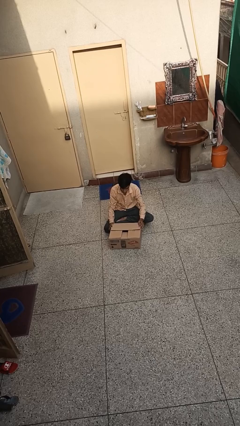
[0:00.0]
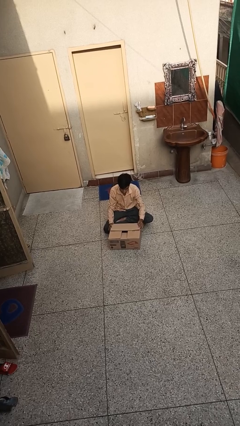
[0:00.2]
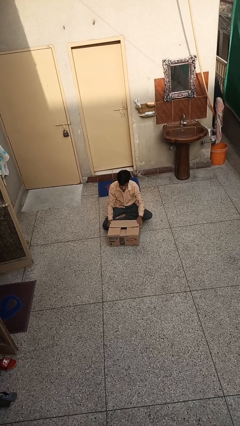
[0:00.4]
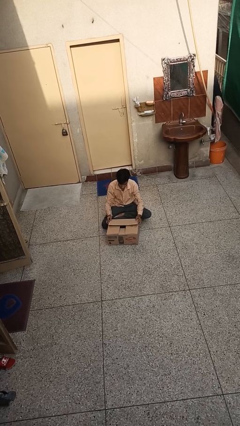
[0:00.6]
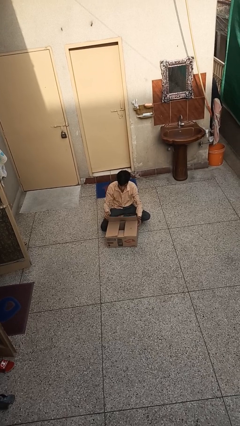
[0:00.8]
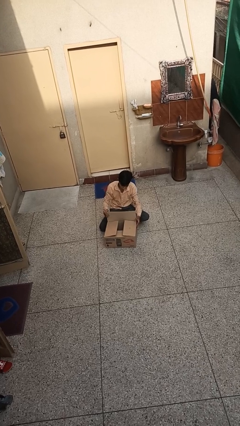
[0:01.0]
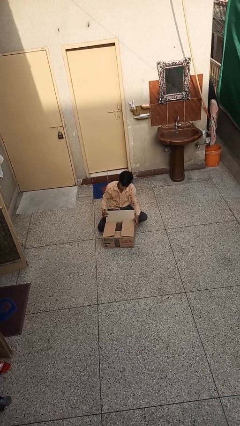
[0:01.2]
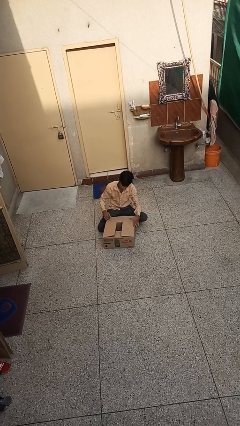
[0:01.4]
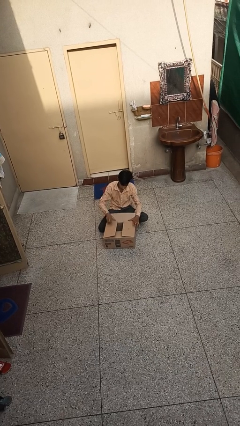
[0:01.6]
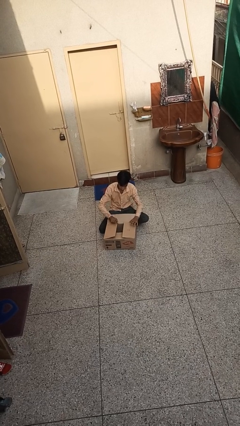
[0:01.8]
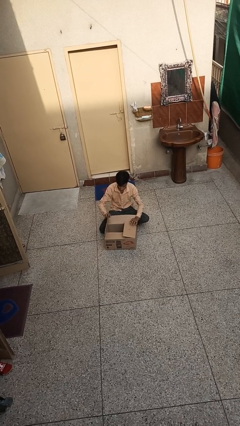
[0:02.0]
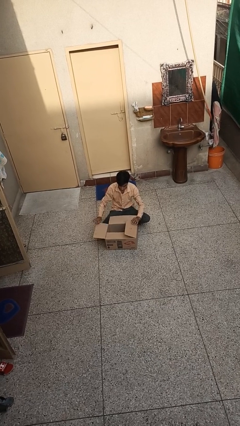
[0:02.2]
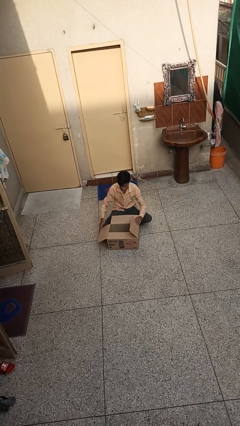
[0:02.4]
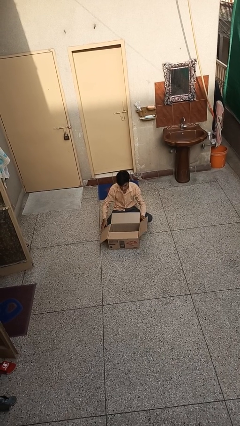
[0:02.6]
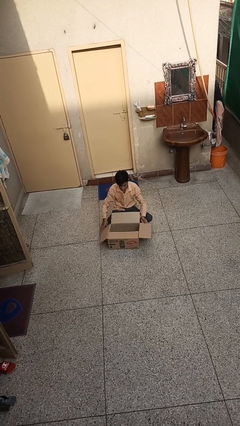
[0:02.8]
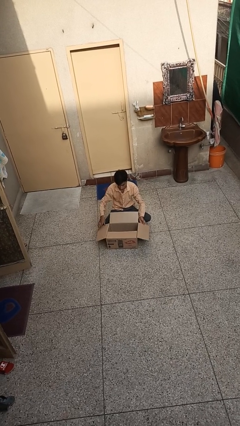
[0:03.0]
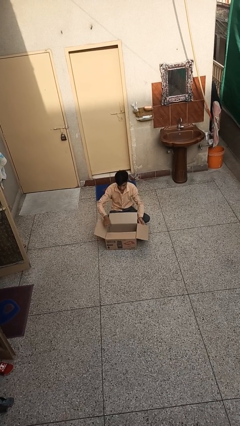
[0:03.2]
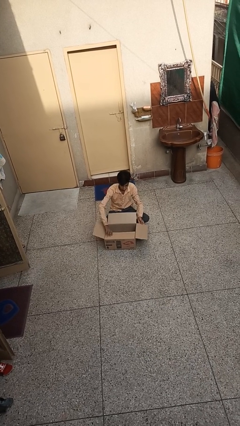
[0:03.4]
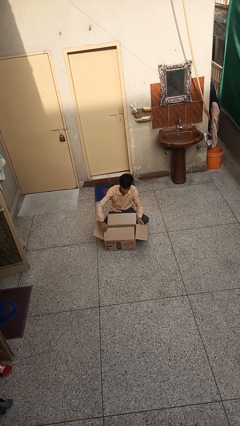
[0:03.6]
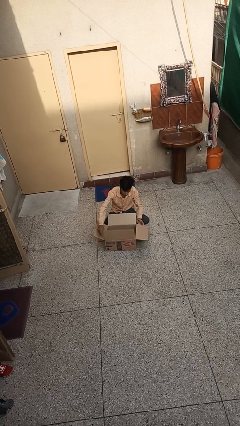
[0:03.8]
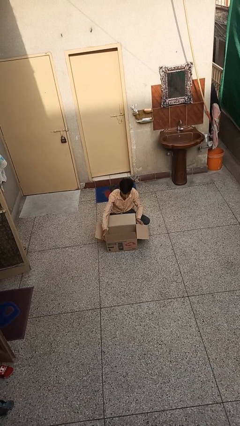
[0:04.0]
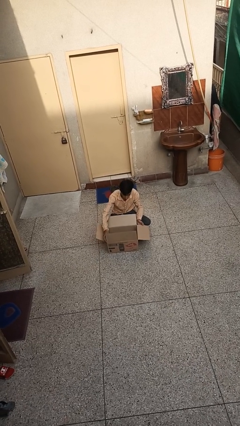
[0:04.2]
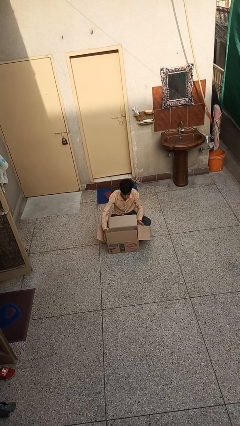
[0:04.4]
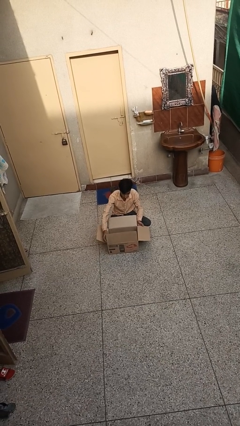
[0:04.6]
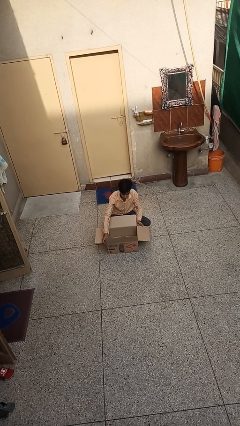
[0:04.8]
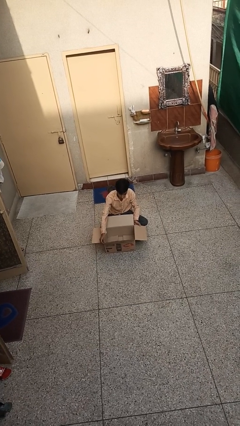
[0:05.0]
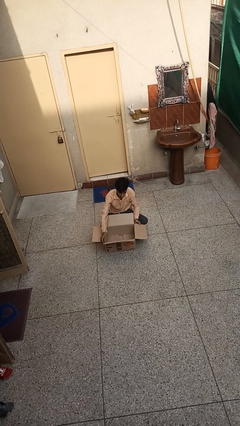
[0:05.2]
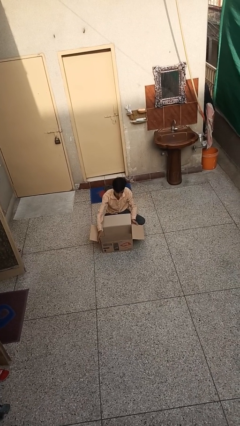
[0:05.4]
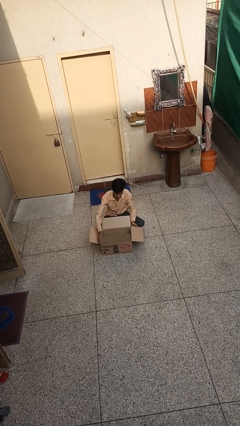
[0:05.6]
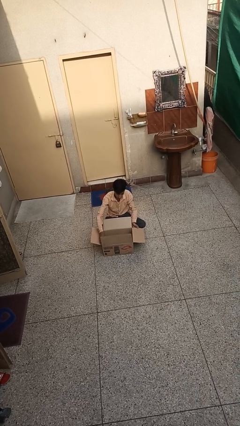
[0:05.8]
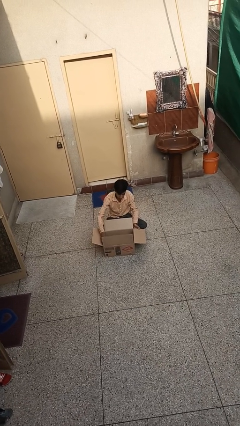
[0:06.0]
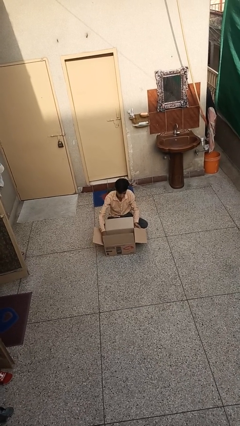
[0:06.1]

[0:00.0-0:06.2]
person opens box

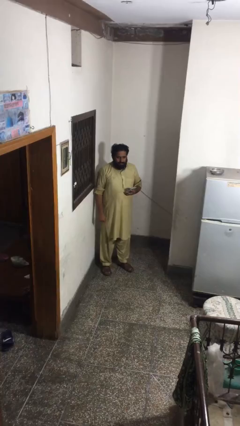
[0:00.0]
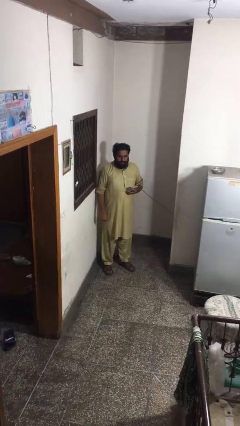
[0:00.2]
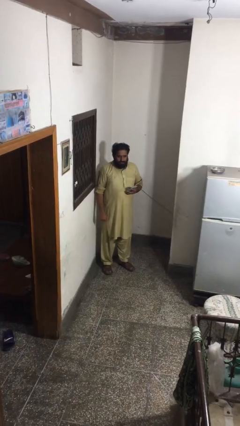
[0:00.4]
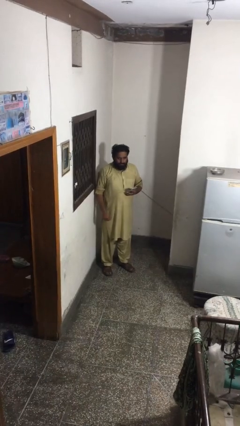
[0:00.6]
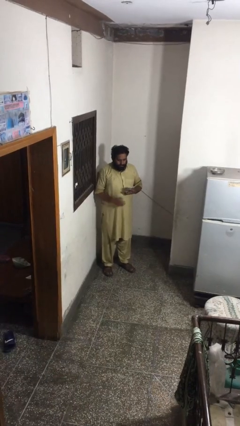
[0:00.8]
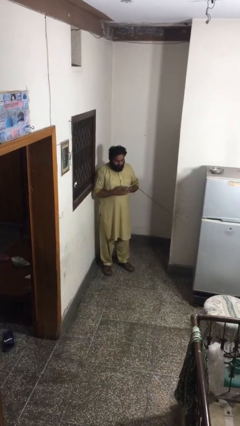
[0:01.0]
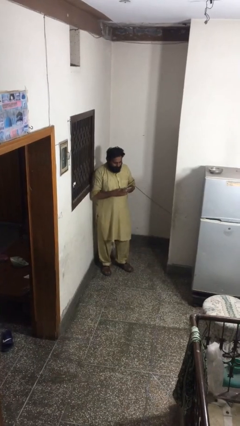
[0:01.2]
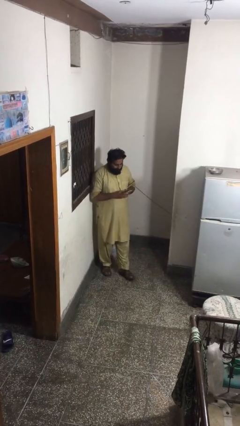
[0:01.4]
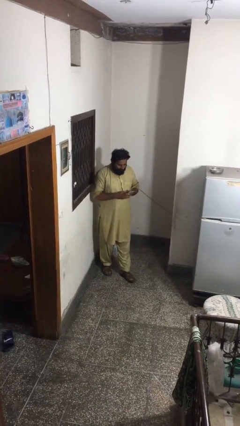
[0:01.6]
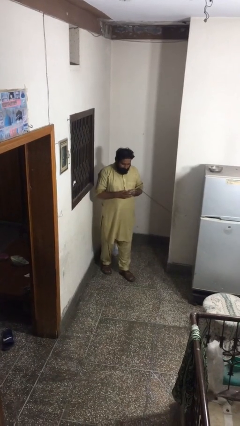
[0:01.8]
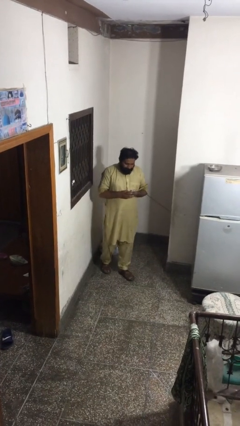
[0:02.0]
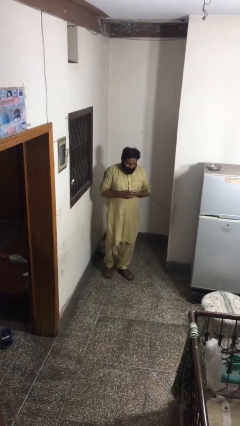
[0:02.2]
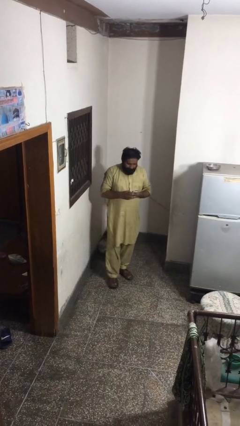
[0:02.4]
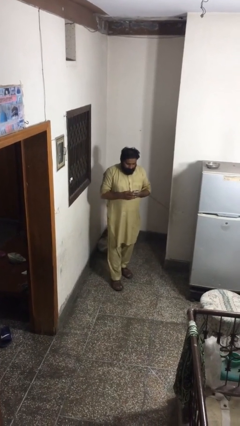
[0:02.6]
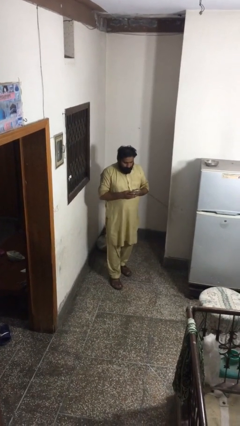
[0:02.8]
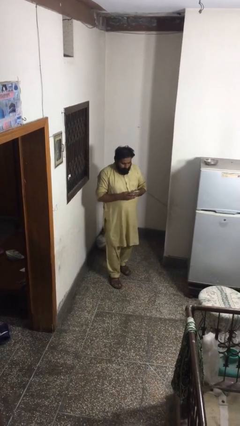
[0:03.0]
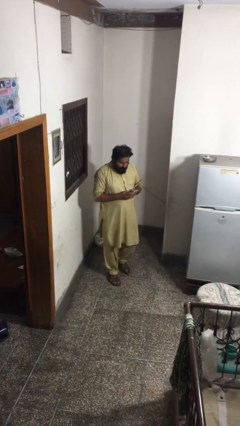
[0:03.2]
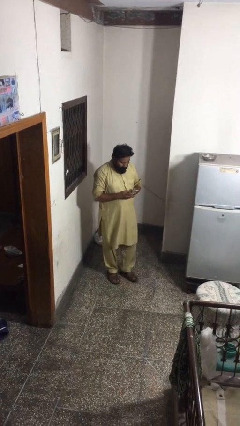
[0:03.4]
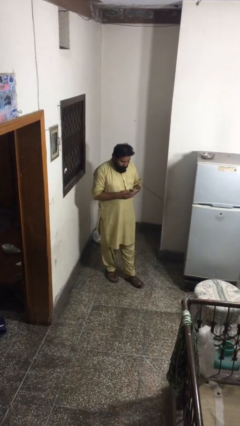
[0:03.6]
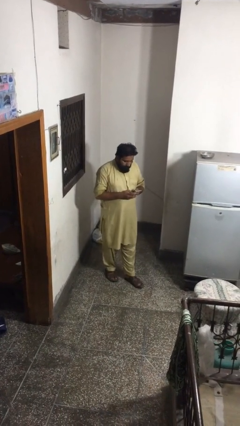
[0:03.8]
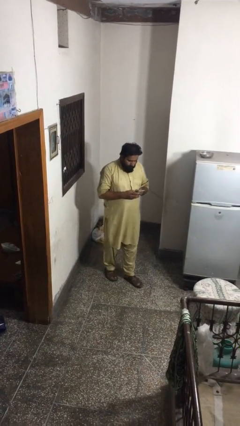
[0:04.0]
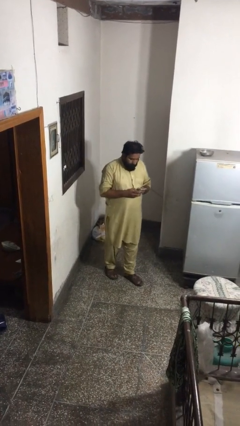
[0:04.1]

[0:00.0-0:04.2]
person texts on phone

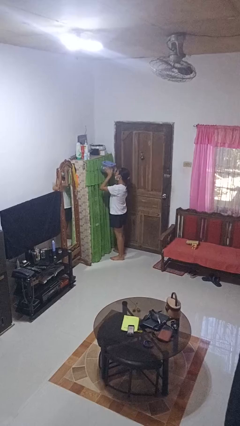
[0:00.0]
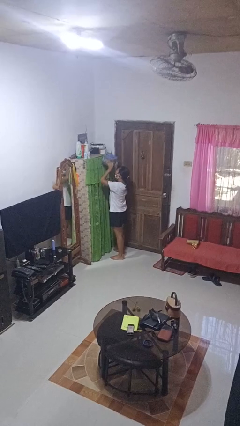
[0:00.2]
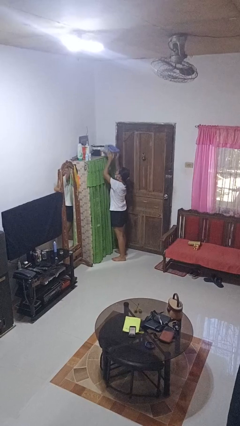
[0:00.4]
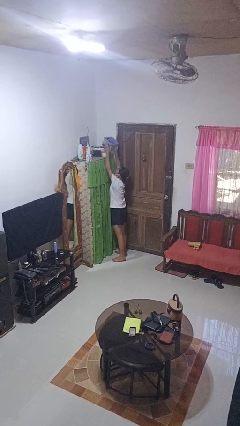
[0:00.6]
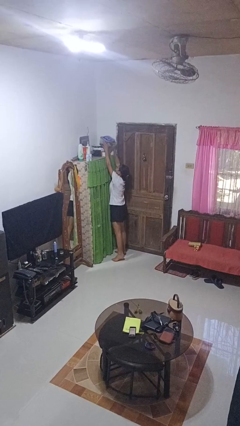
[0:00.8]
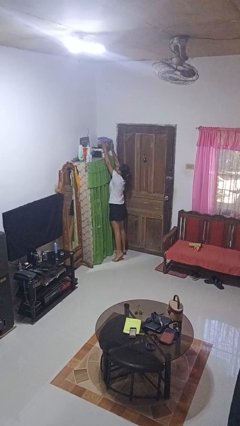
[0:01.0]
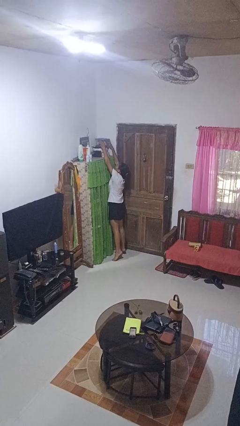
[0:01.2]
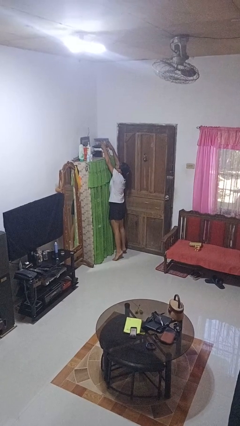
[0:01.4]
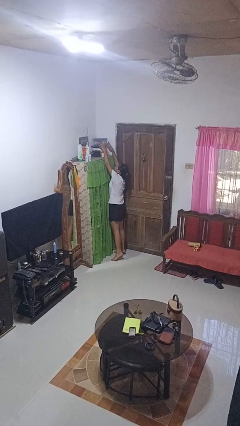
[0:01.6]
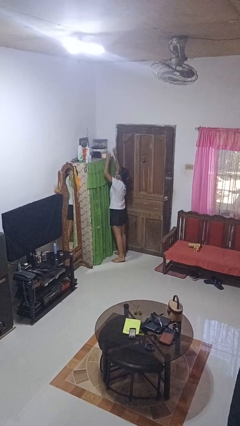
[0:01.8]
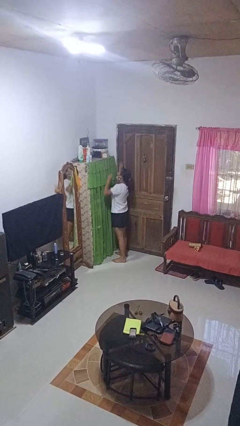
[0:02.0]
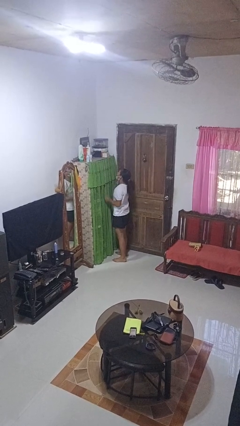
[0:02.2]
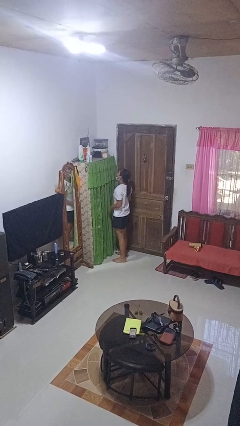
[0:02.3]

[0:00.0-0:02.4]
person puts down object on shelf

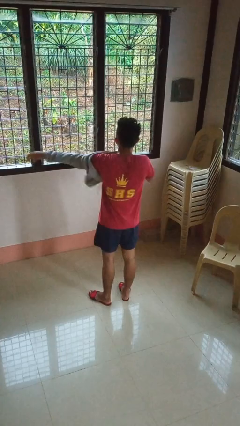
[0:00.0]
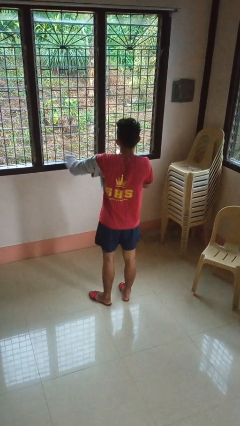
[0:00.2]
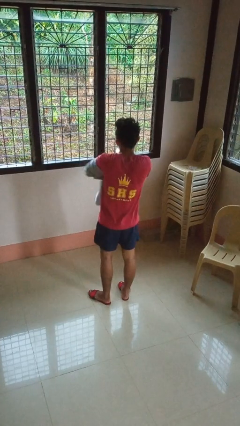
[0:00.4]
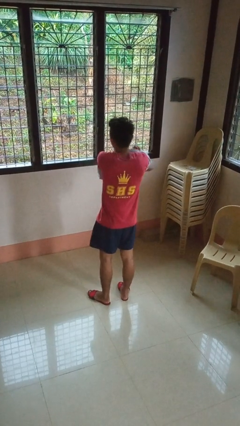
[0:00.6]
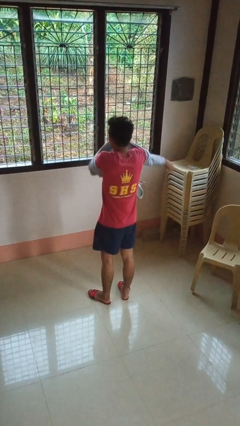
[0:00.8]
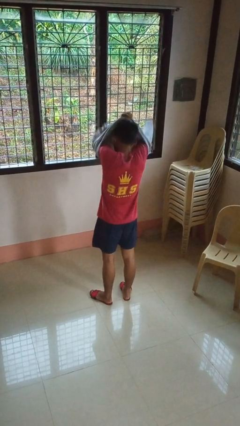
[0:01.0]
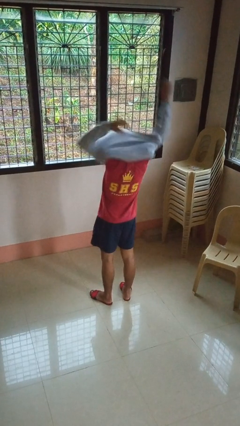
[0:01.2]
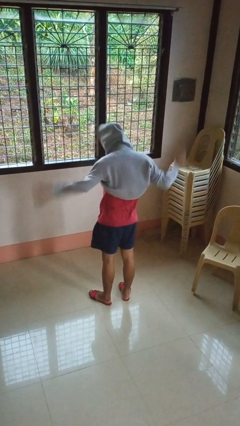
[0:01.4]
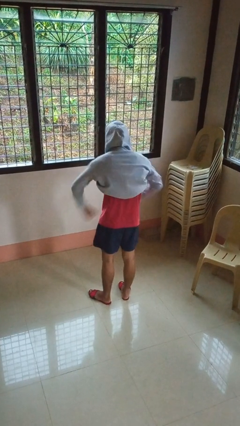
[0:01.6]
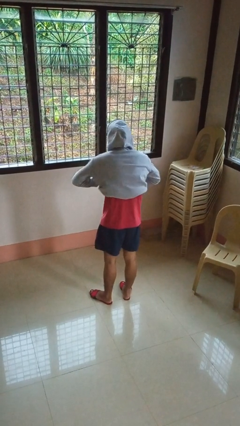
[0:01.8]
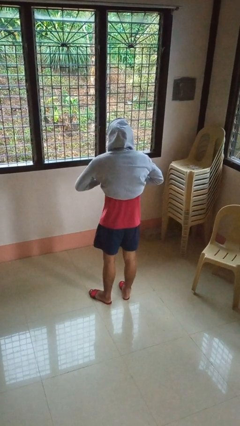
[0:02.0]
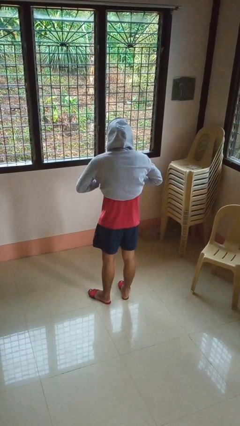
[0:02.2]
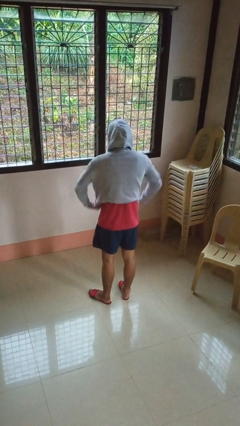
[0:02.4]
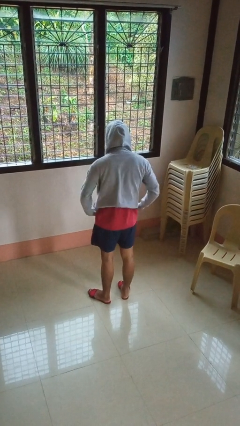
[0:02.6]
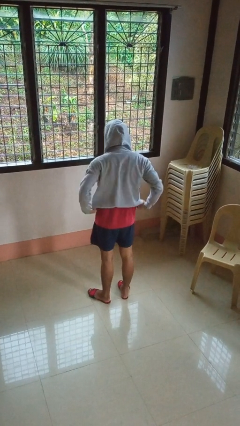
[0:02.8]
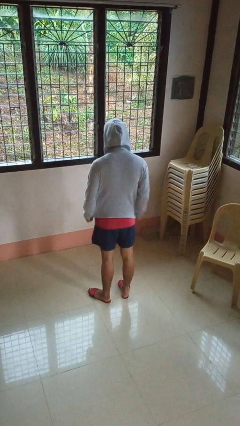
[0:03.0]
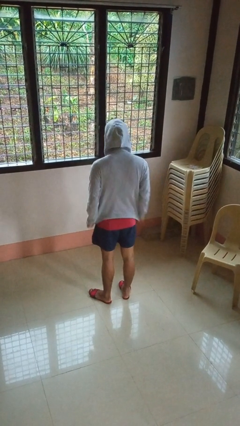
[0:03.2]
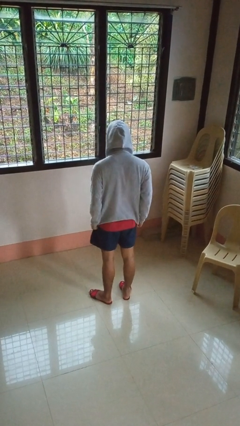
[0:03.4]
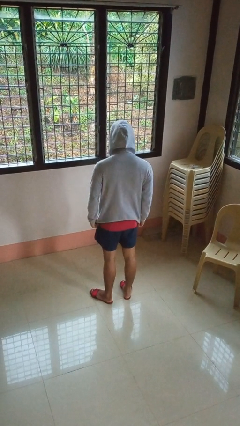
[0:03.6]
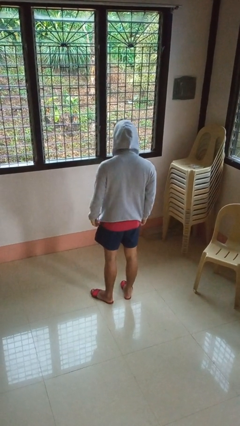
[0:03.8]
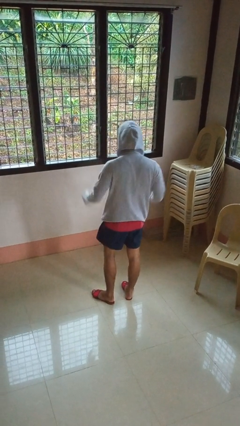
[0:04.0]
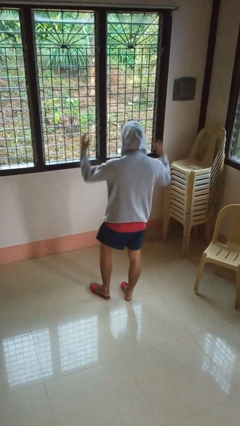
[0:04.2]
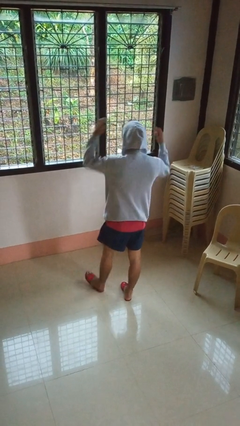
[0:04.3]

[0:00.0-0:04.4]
person puts on hoodie

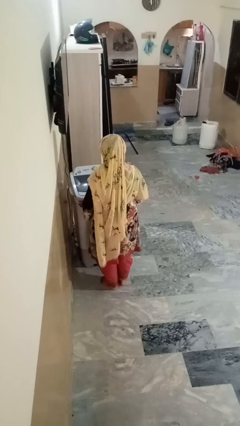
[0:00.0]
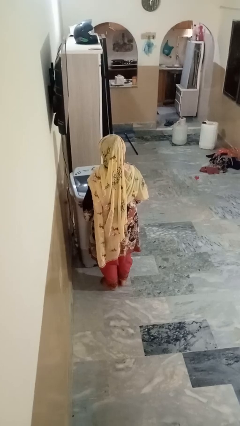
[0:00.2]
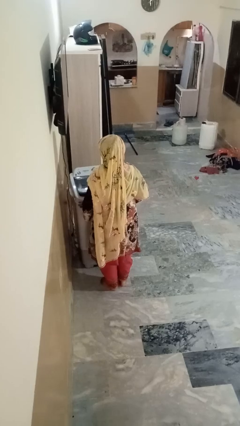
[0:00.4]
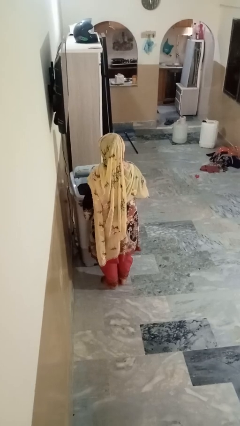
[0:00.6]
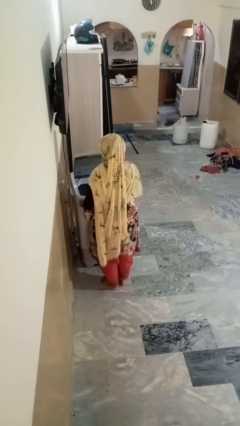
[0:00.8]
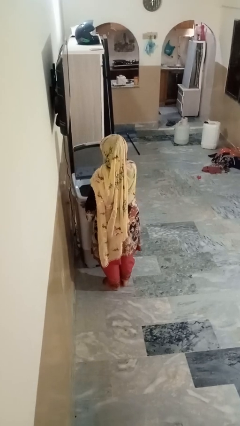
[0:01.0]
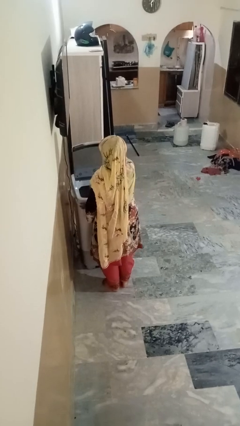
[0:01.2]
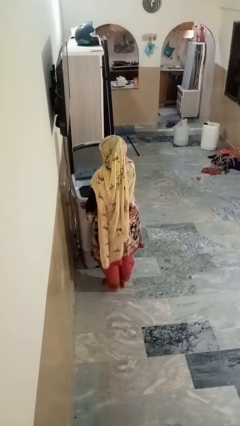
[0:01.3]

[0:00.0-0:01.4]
person opens clothes washer
